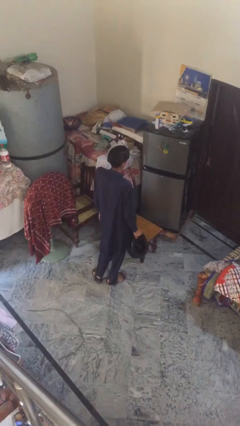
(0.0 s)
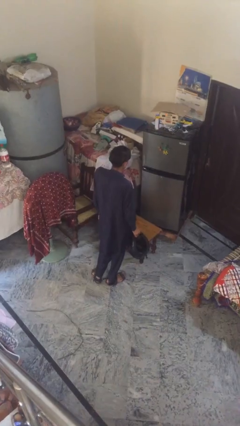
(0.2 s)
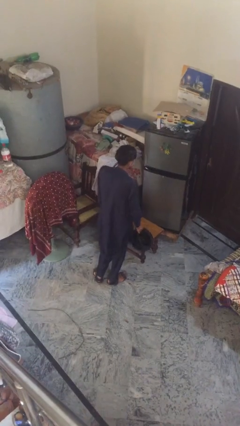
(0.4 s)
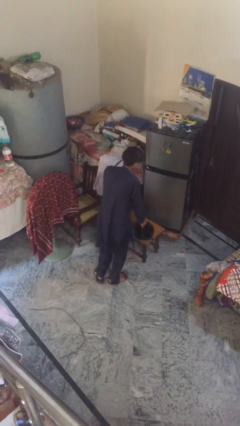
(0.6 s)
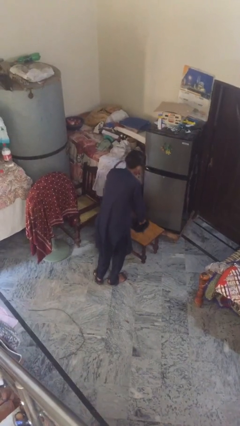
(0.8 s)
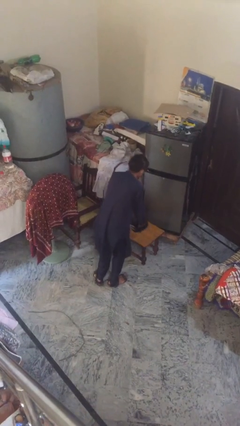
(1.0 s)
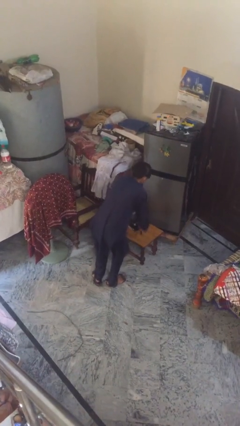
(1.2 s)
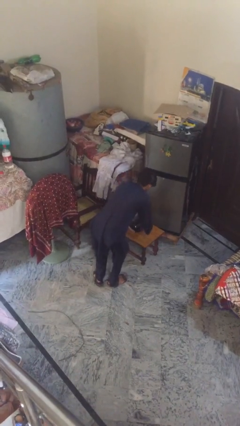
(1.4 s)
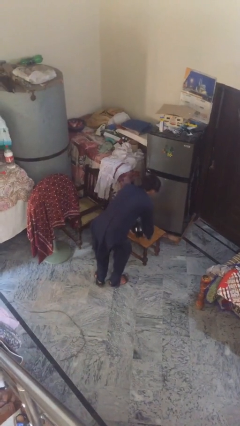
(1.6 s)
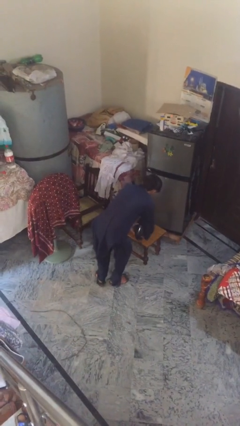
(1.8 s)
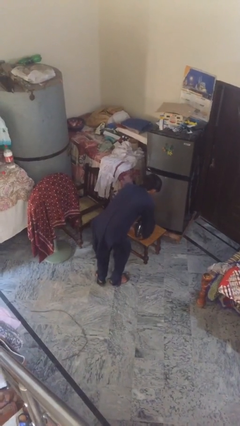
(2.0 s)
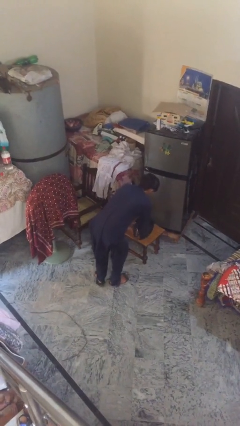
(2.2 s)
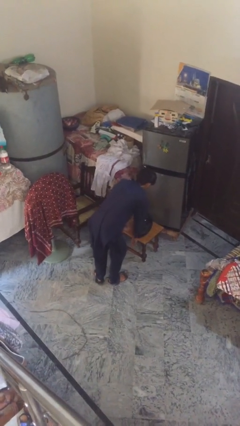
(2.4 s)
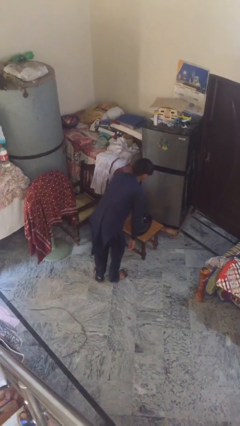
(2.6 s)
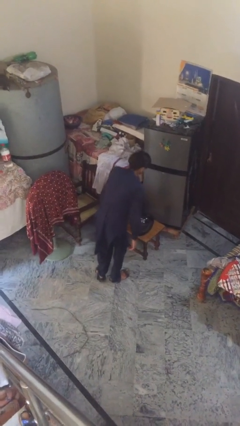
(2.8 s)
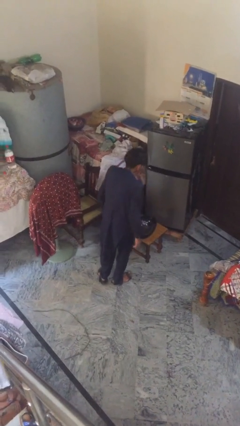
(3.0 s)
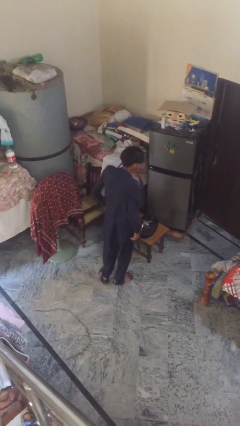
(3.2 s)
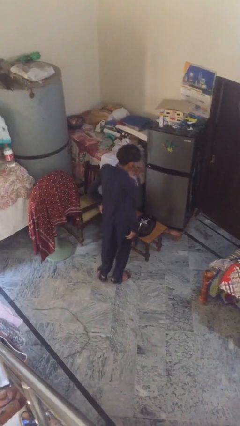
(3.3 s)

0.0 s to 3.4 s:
person puts down object on table

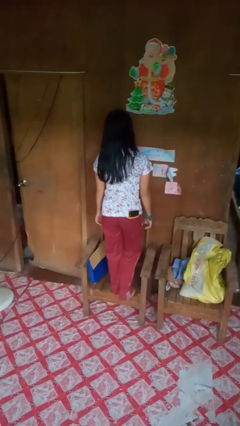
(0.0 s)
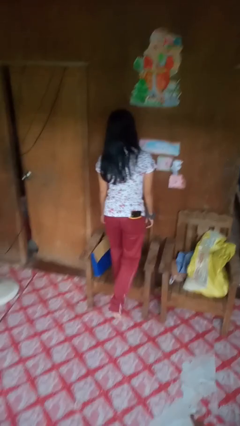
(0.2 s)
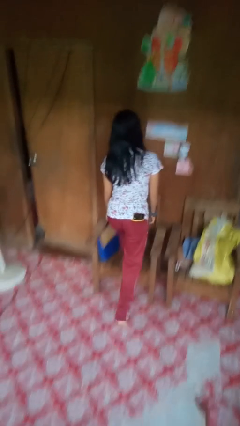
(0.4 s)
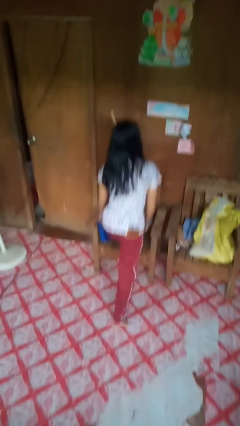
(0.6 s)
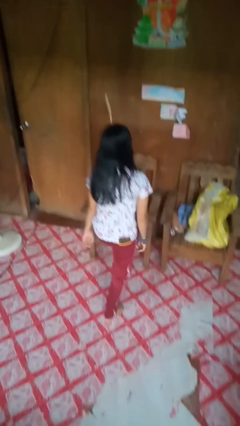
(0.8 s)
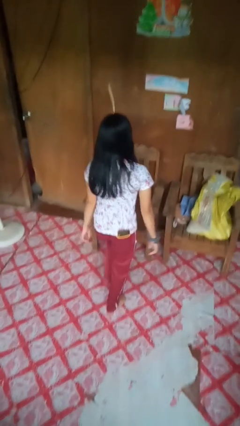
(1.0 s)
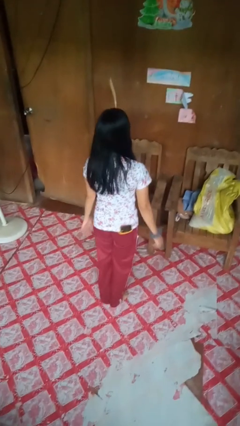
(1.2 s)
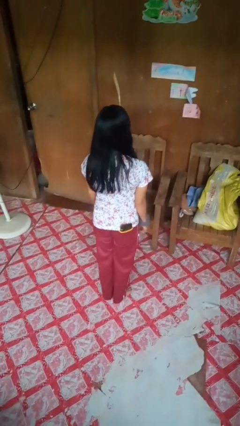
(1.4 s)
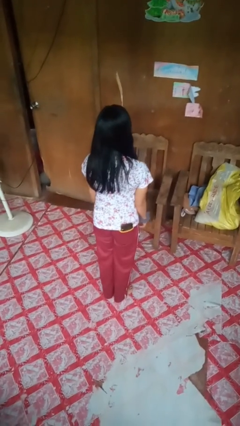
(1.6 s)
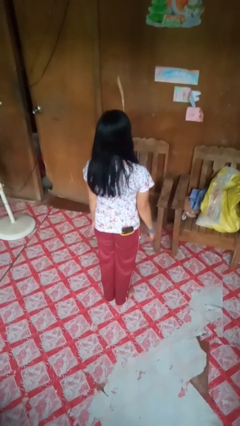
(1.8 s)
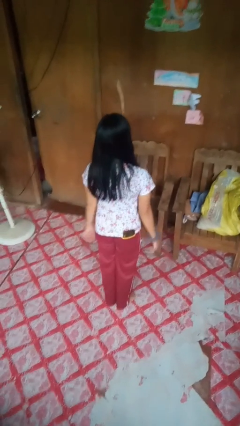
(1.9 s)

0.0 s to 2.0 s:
person climbs off chair

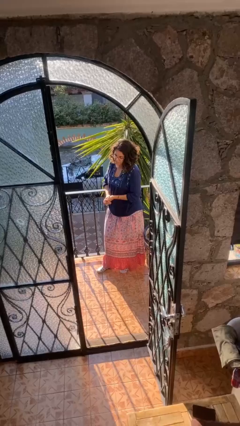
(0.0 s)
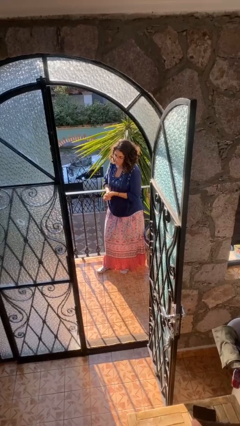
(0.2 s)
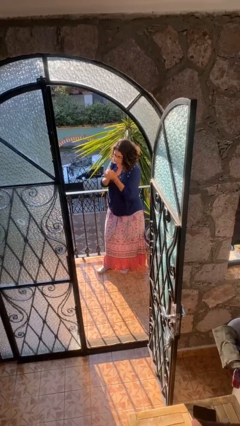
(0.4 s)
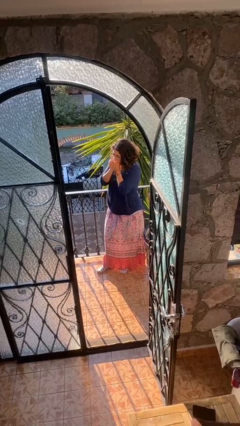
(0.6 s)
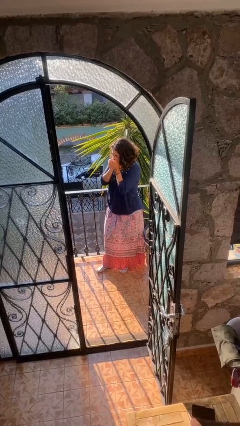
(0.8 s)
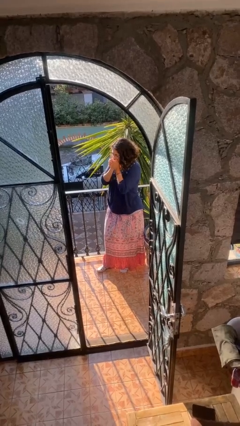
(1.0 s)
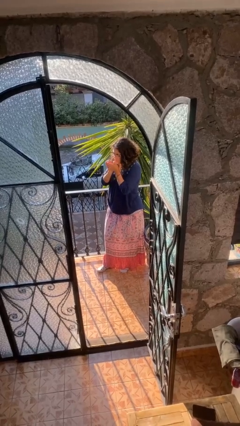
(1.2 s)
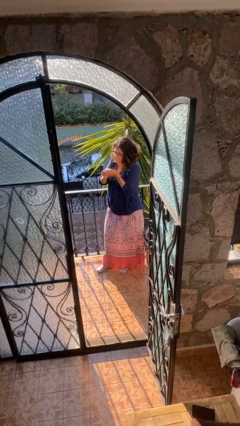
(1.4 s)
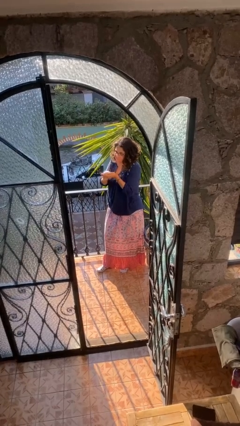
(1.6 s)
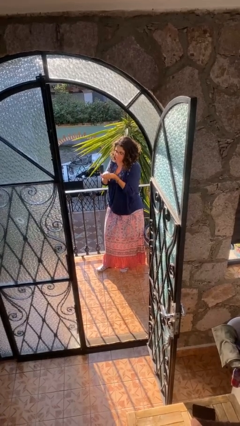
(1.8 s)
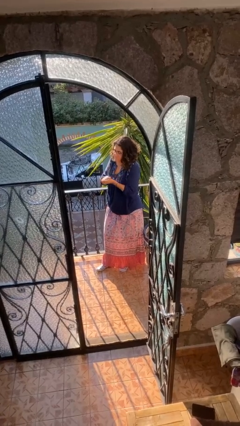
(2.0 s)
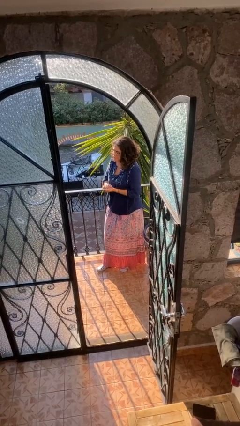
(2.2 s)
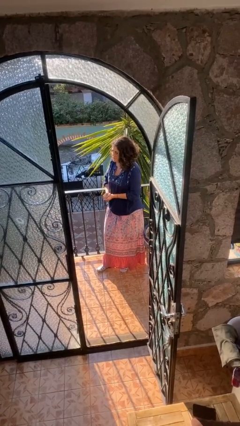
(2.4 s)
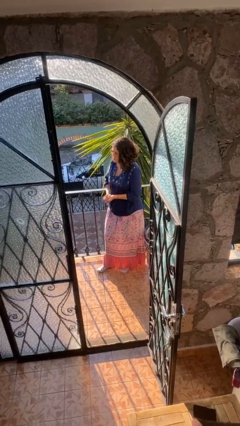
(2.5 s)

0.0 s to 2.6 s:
person blows into hands

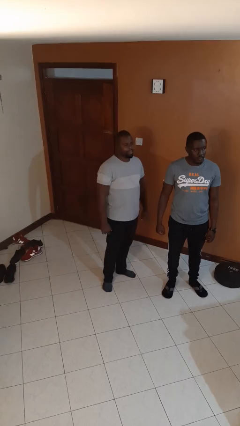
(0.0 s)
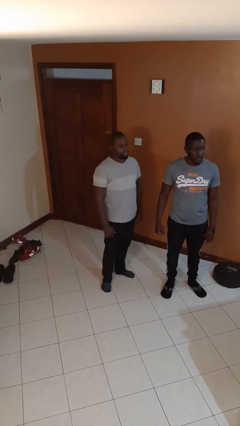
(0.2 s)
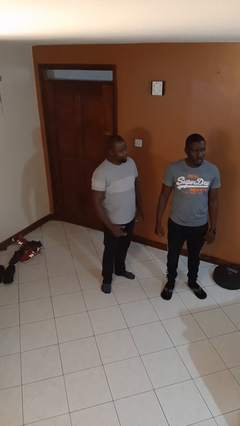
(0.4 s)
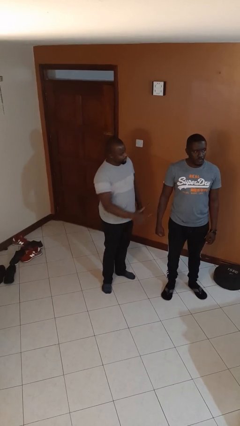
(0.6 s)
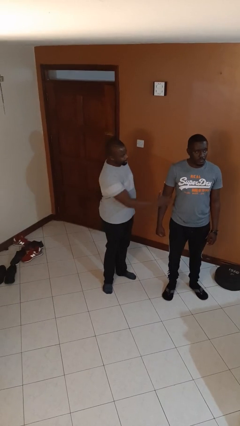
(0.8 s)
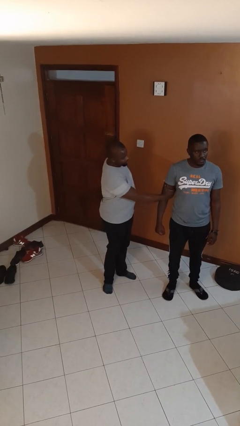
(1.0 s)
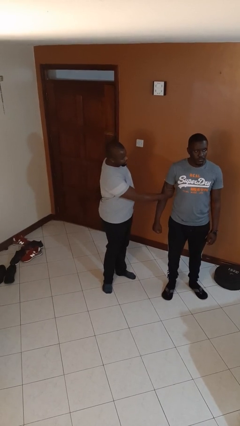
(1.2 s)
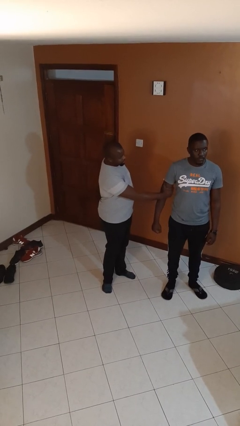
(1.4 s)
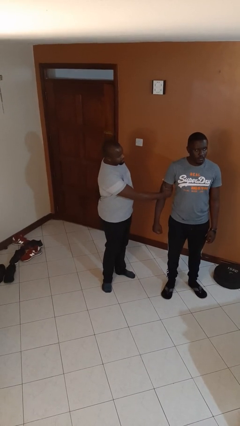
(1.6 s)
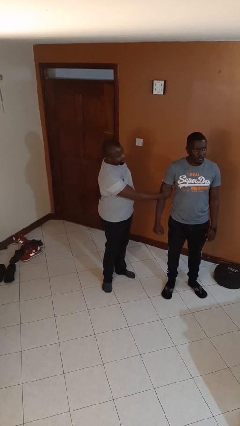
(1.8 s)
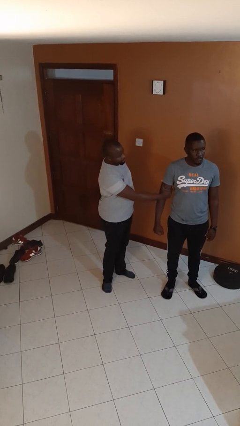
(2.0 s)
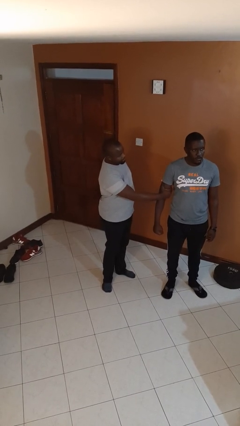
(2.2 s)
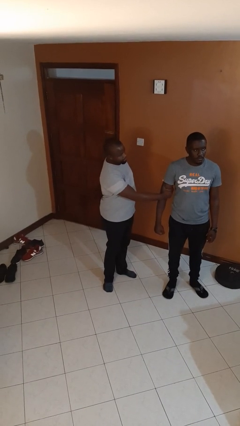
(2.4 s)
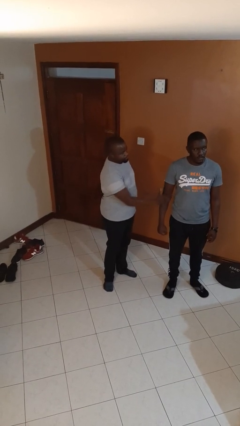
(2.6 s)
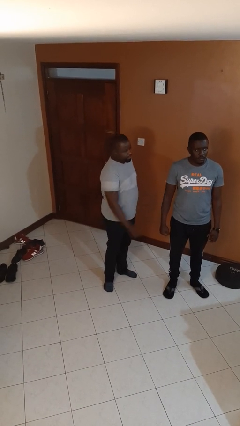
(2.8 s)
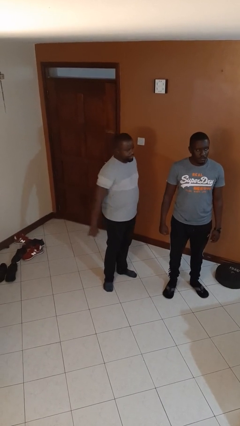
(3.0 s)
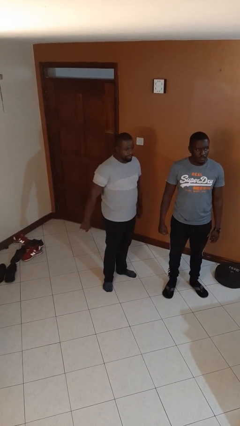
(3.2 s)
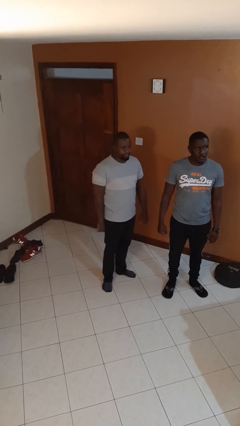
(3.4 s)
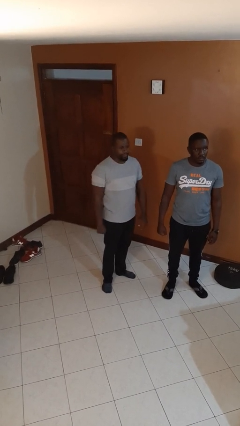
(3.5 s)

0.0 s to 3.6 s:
person grabs person by bicep

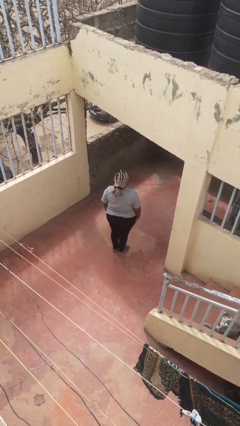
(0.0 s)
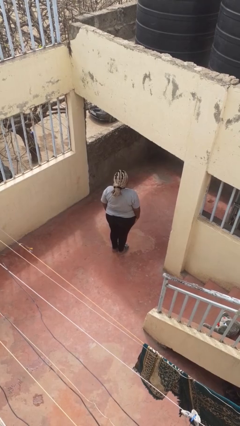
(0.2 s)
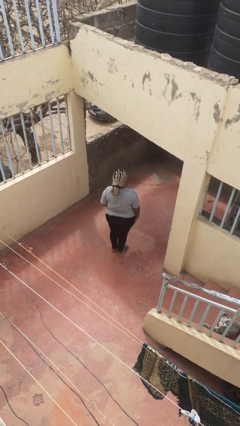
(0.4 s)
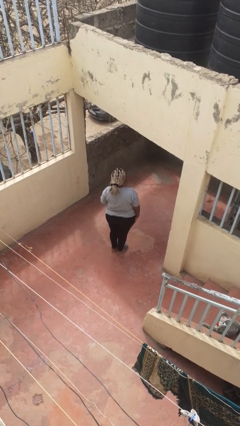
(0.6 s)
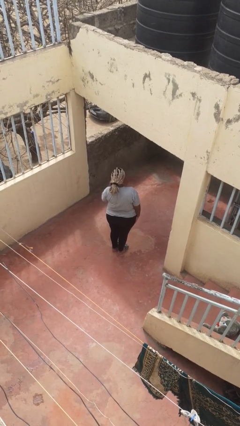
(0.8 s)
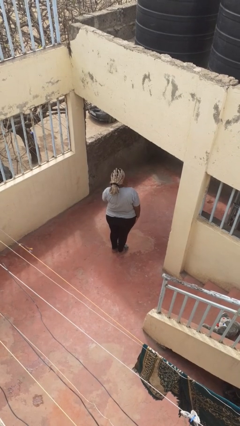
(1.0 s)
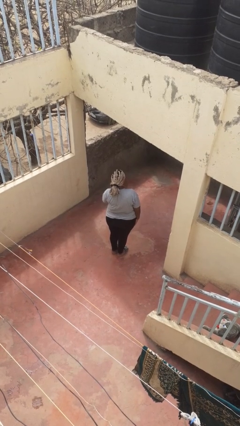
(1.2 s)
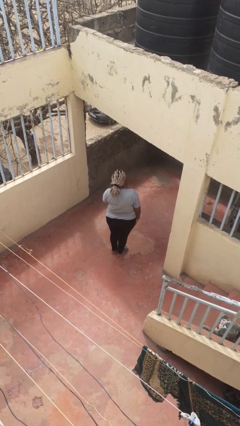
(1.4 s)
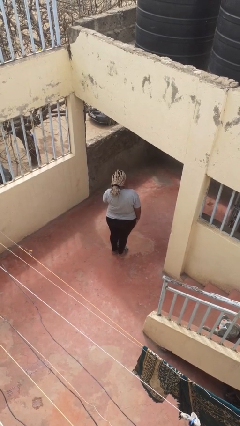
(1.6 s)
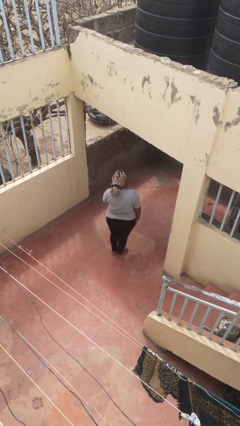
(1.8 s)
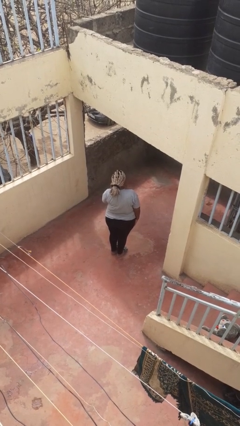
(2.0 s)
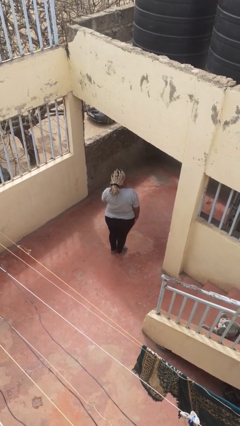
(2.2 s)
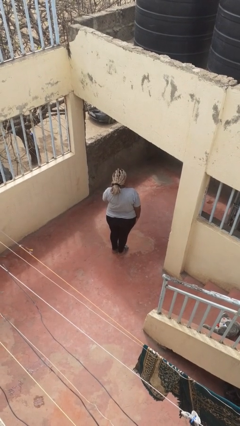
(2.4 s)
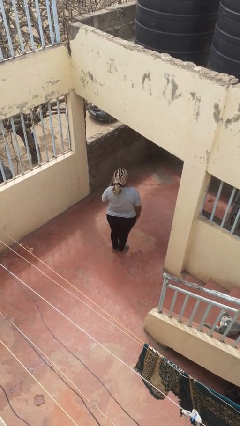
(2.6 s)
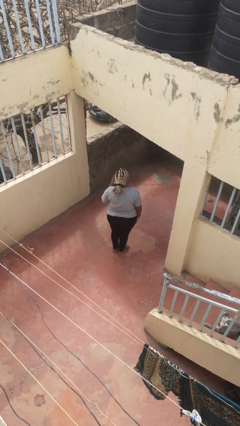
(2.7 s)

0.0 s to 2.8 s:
person gestures listen closely

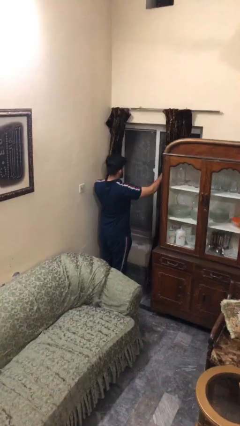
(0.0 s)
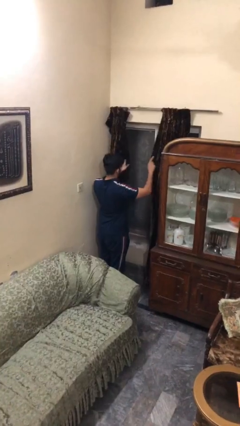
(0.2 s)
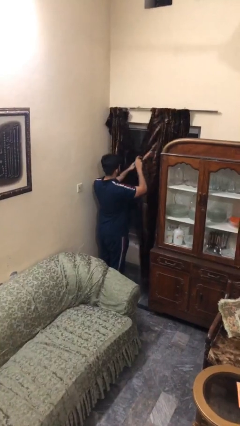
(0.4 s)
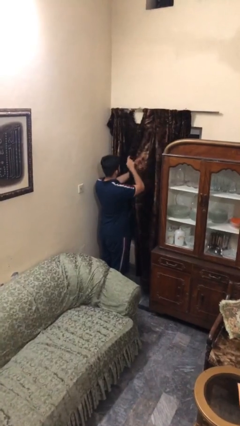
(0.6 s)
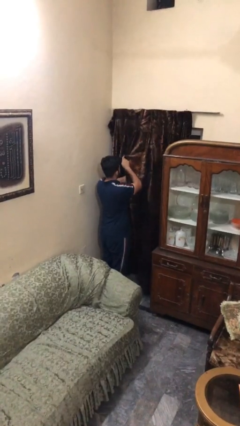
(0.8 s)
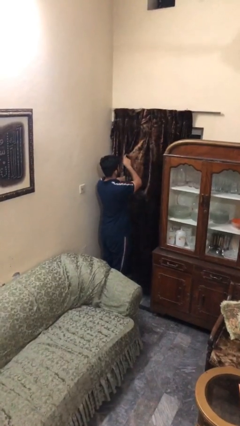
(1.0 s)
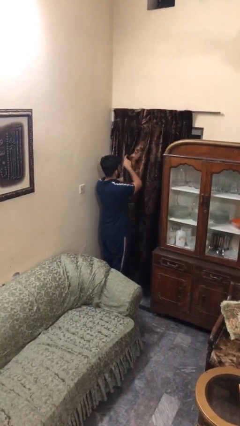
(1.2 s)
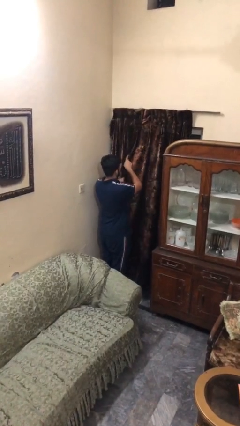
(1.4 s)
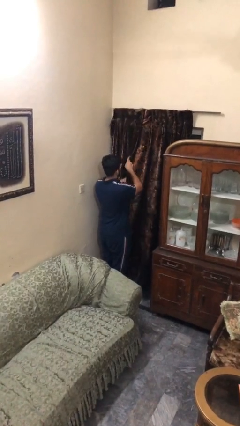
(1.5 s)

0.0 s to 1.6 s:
person closes curtains

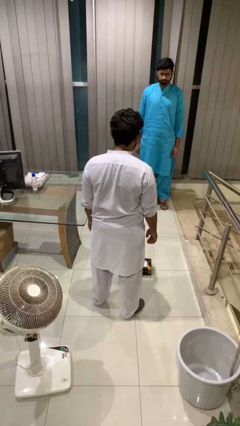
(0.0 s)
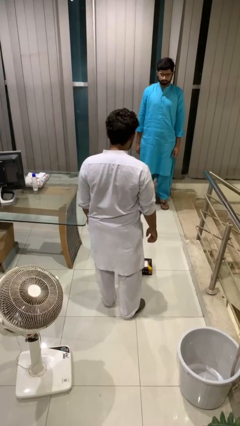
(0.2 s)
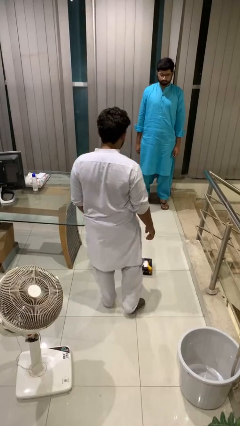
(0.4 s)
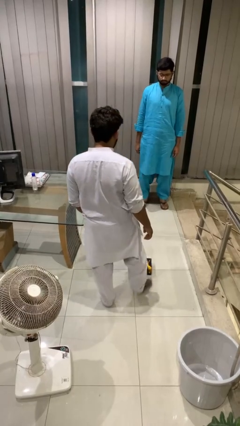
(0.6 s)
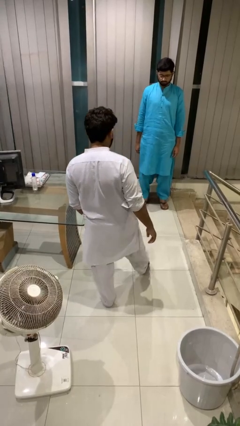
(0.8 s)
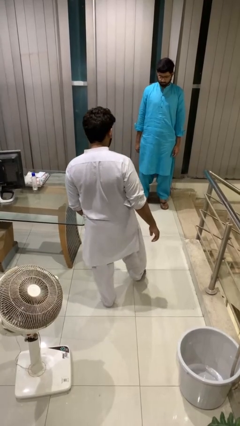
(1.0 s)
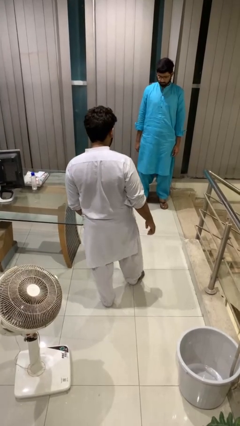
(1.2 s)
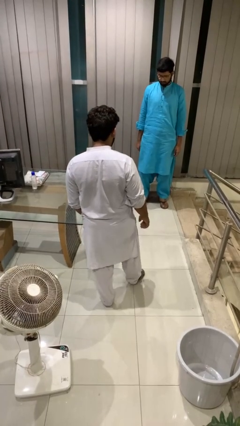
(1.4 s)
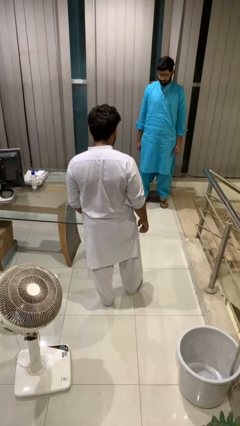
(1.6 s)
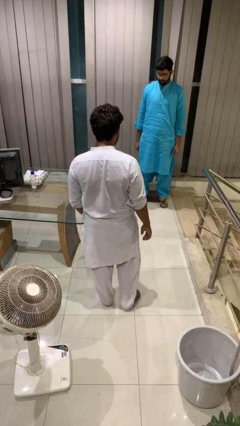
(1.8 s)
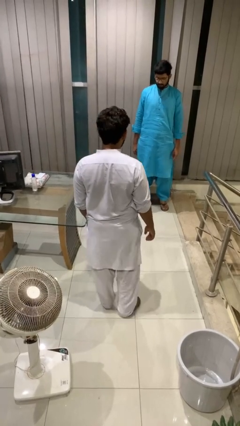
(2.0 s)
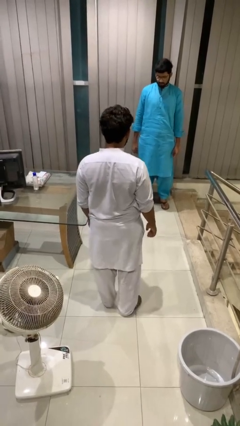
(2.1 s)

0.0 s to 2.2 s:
person kicks object to person
